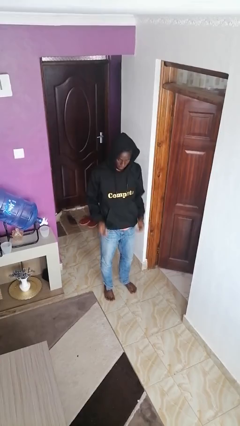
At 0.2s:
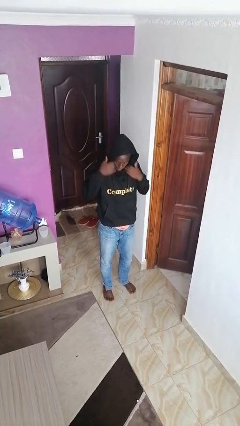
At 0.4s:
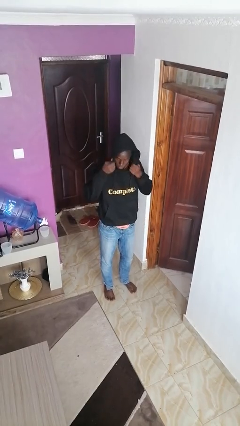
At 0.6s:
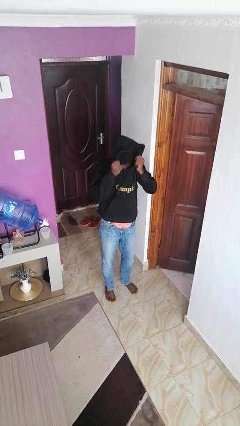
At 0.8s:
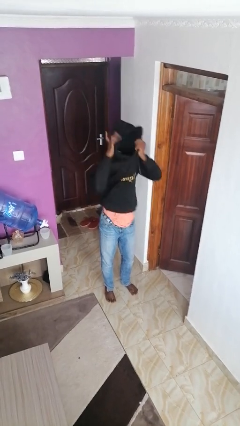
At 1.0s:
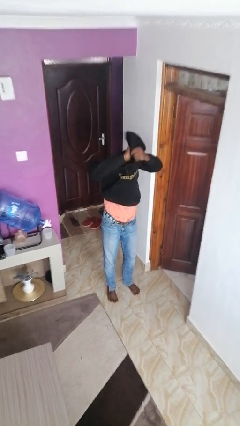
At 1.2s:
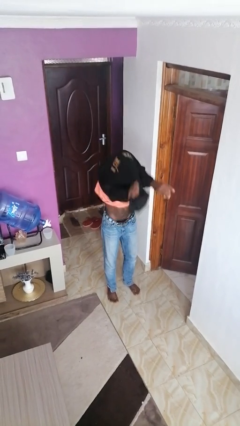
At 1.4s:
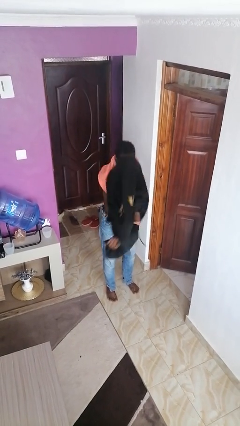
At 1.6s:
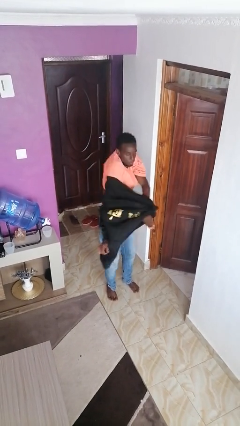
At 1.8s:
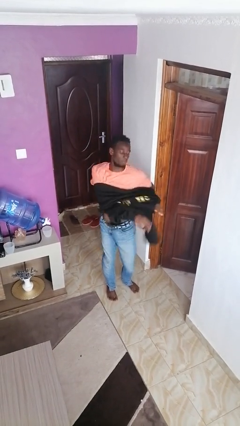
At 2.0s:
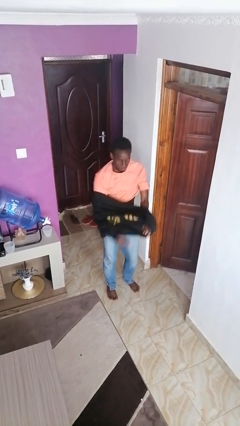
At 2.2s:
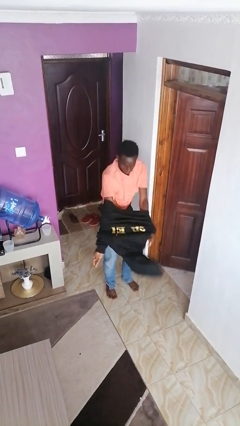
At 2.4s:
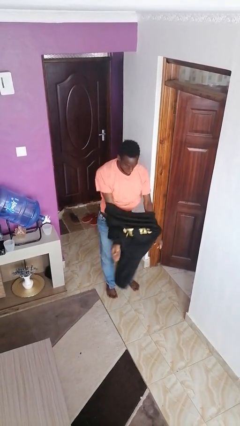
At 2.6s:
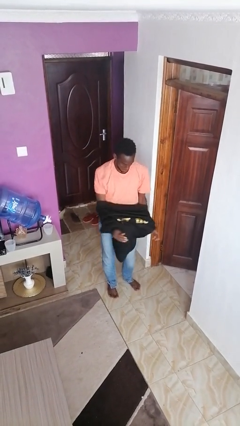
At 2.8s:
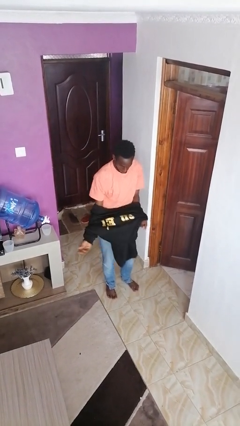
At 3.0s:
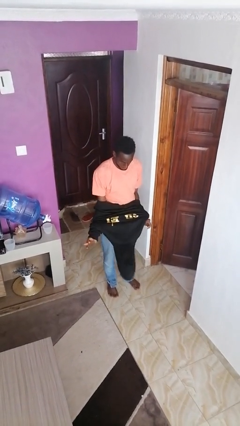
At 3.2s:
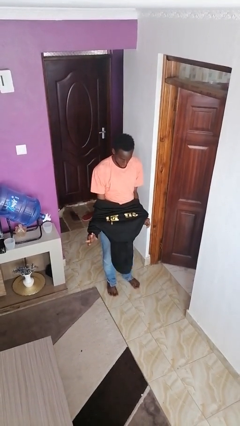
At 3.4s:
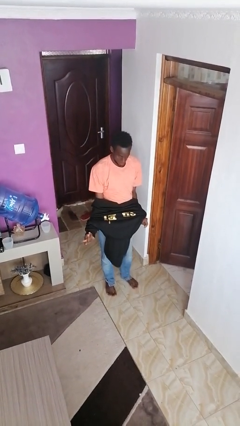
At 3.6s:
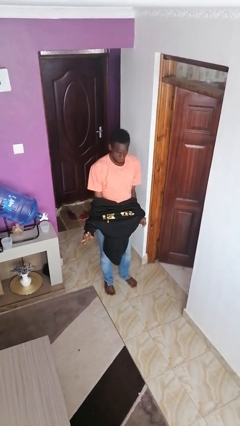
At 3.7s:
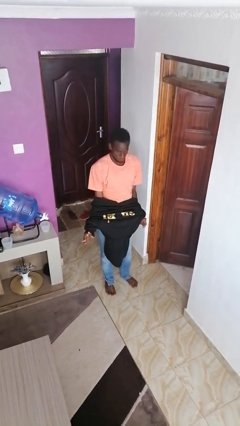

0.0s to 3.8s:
person takes off hoodie

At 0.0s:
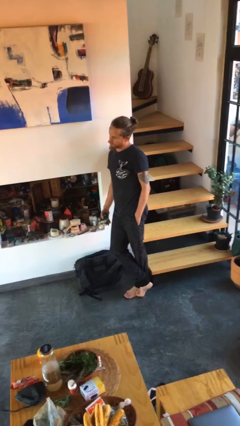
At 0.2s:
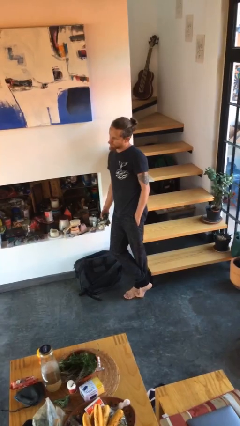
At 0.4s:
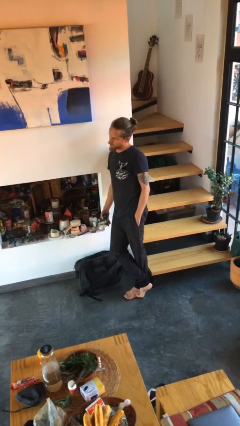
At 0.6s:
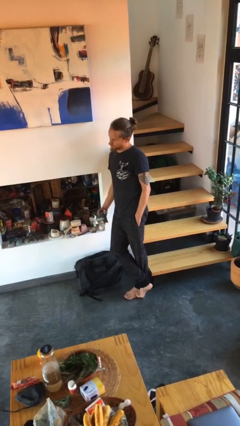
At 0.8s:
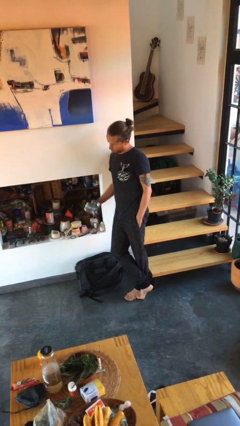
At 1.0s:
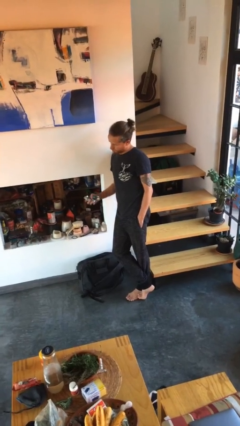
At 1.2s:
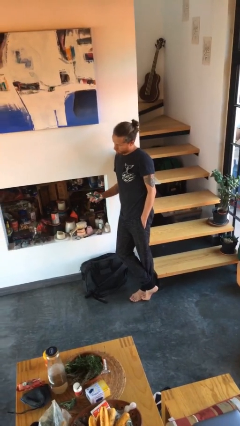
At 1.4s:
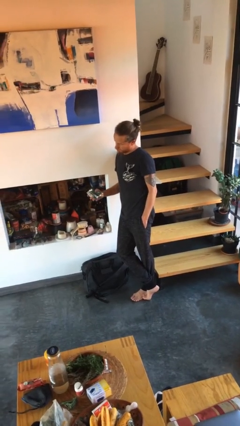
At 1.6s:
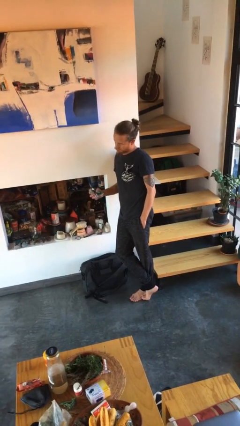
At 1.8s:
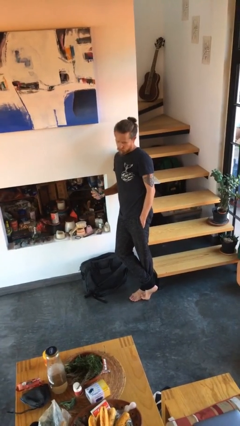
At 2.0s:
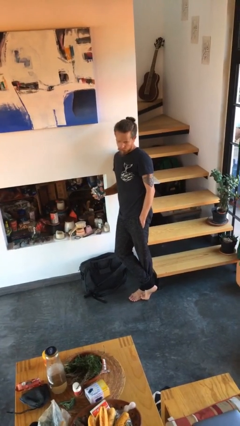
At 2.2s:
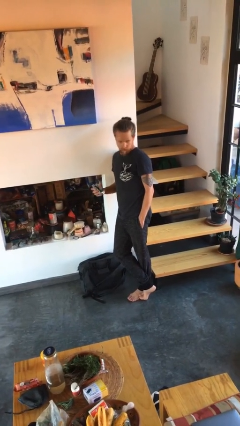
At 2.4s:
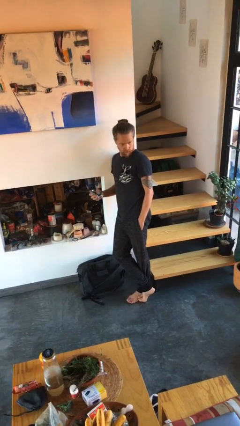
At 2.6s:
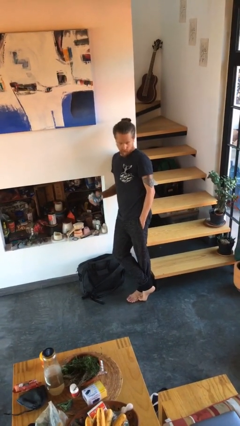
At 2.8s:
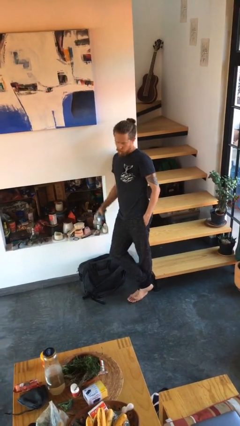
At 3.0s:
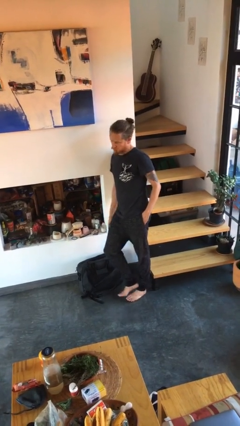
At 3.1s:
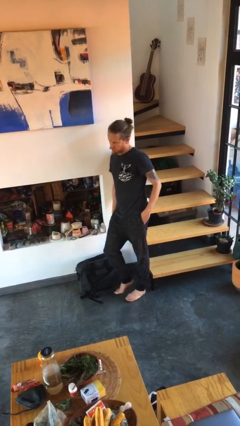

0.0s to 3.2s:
person squeezes object

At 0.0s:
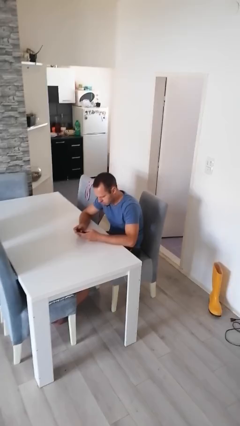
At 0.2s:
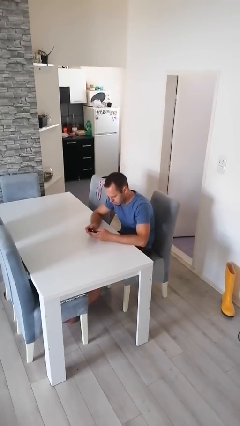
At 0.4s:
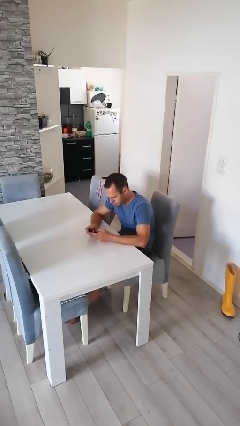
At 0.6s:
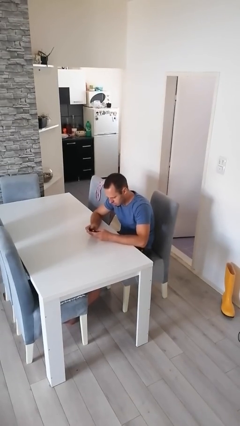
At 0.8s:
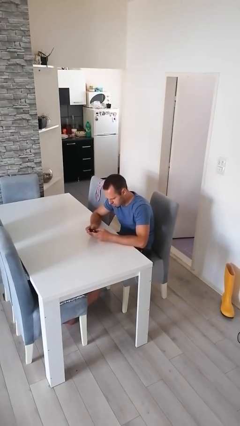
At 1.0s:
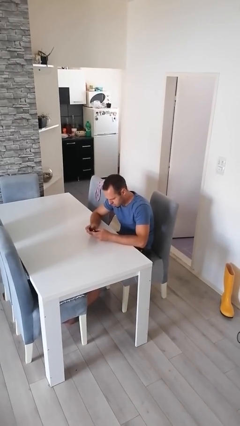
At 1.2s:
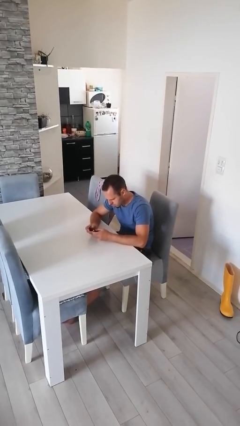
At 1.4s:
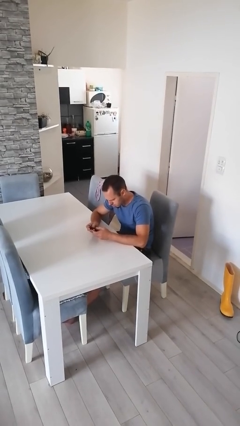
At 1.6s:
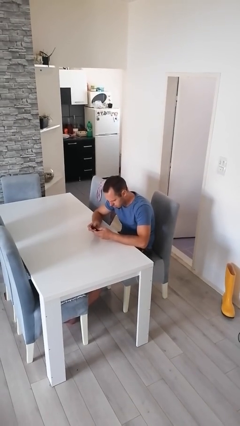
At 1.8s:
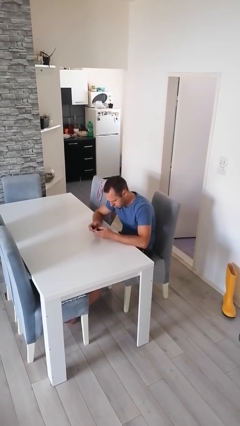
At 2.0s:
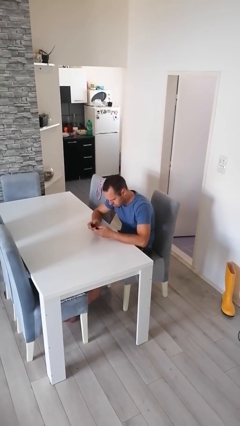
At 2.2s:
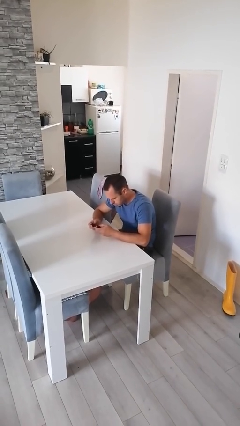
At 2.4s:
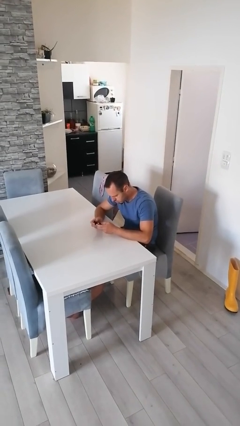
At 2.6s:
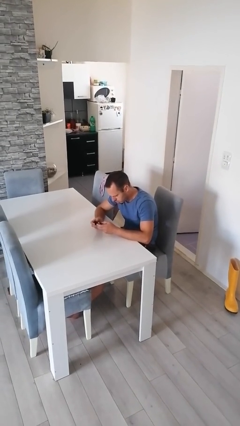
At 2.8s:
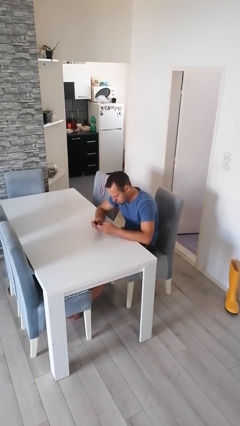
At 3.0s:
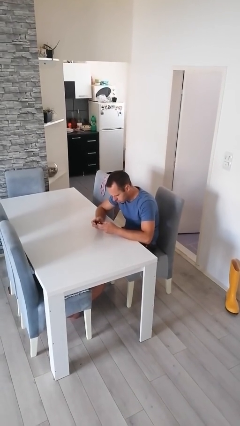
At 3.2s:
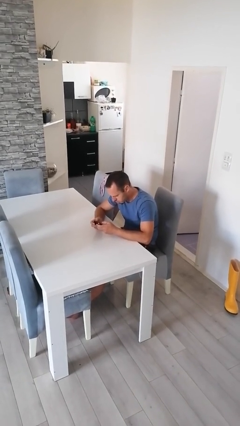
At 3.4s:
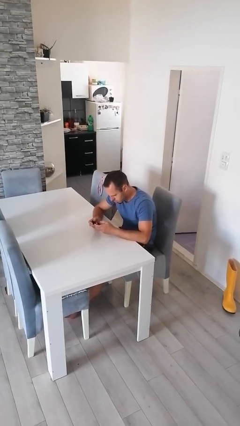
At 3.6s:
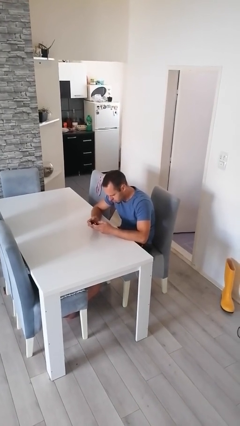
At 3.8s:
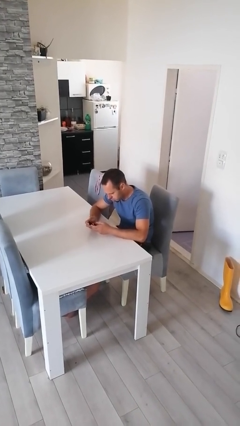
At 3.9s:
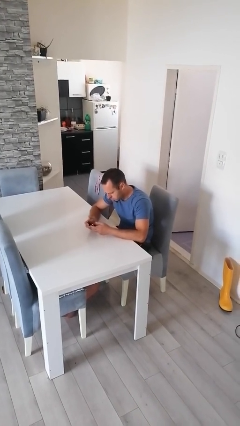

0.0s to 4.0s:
person interacts with handheld game

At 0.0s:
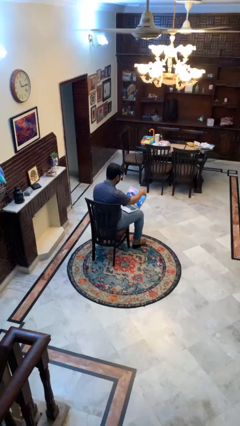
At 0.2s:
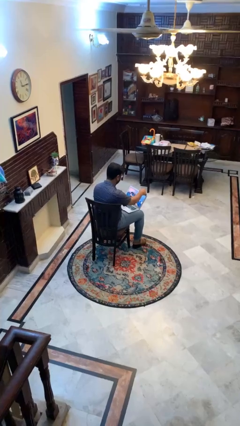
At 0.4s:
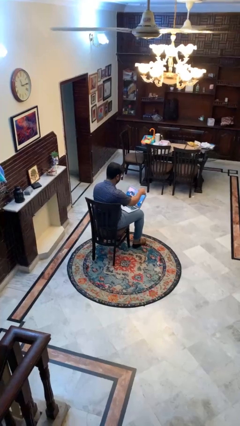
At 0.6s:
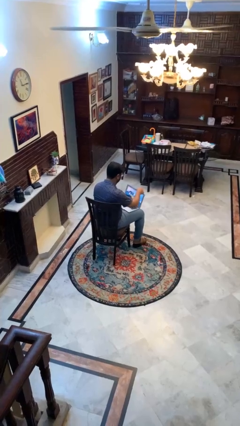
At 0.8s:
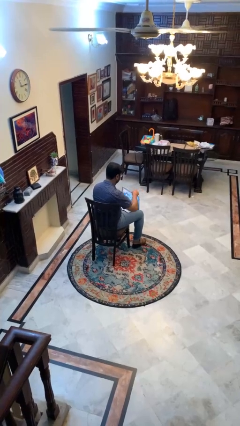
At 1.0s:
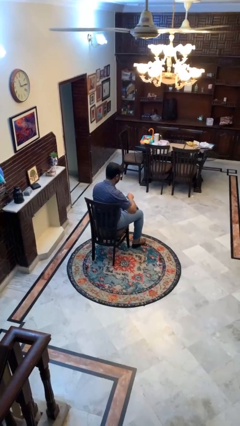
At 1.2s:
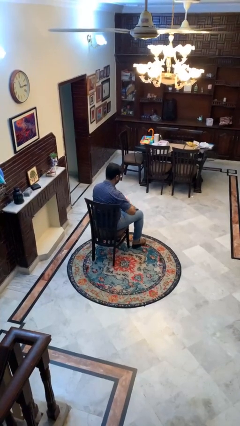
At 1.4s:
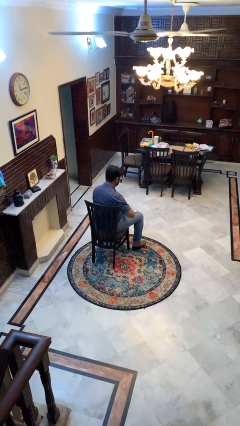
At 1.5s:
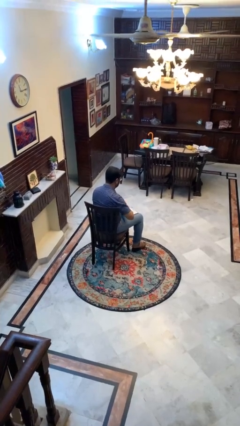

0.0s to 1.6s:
person closes laptop

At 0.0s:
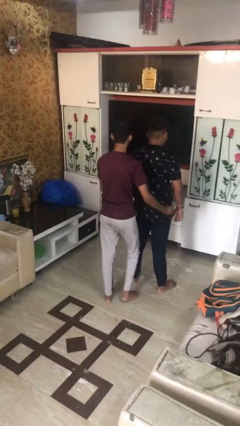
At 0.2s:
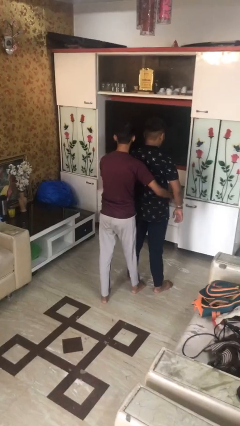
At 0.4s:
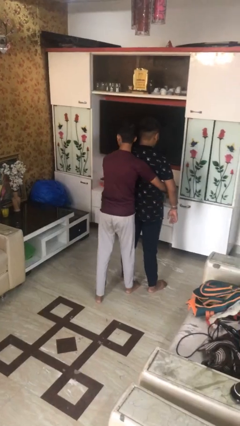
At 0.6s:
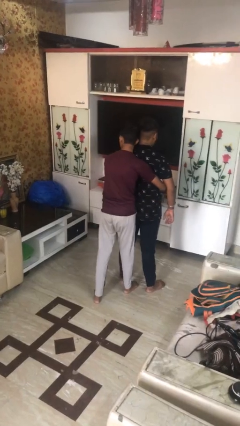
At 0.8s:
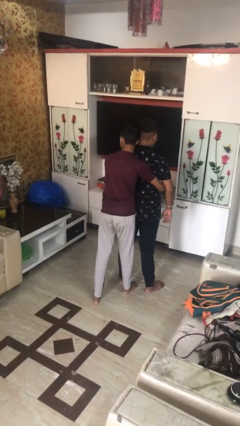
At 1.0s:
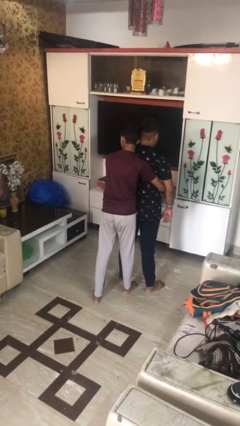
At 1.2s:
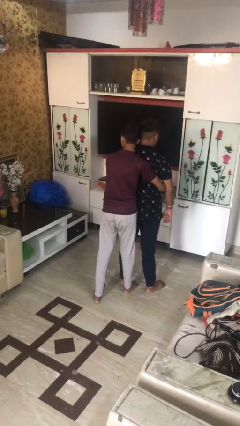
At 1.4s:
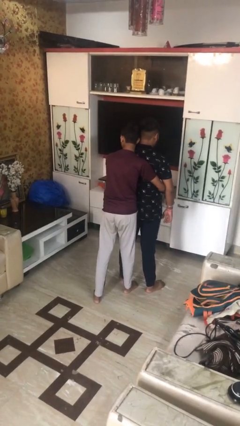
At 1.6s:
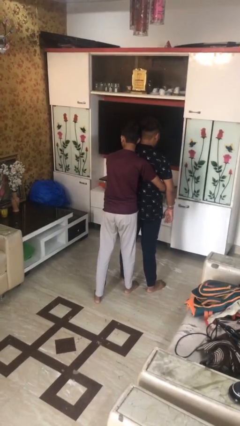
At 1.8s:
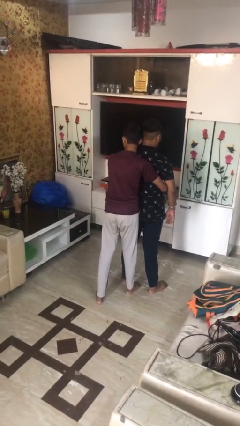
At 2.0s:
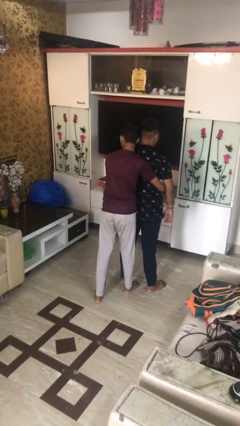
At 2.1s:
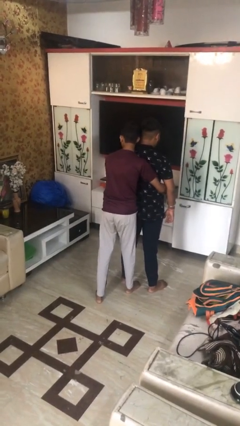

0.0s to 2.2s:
person hugs person from behind

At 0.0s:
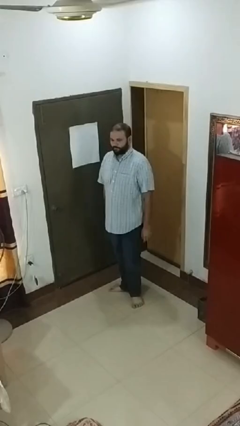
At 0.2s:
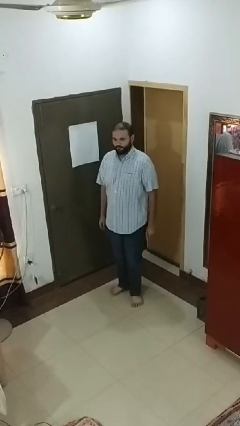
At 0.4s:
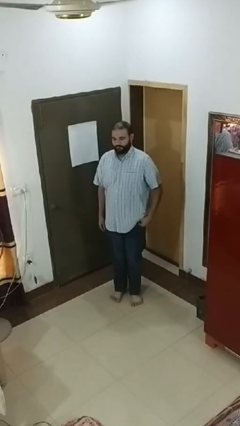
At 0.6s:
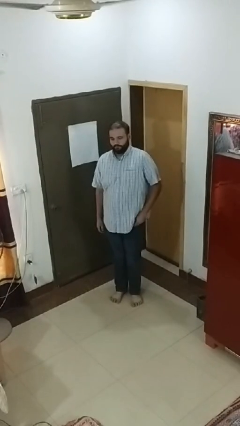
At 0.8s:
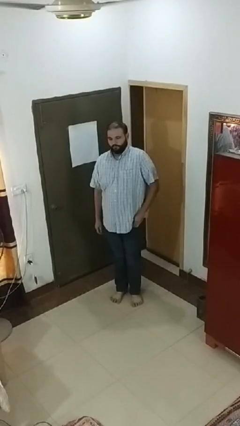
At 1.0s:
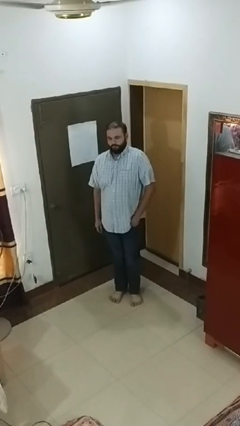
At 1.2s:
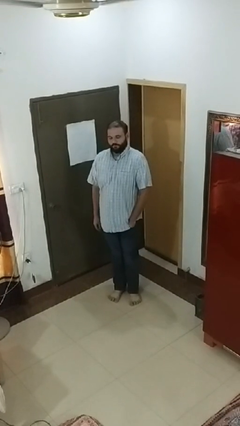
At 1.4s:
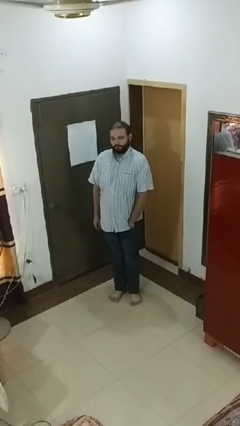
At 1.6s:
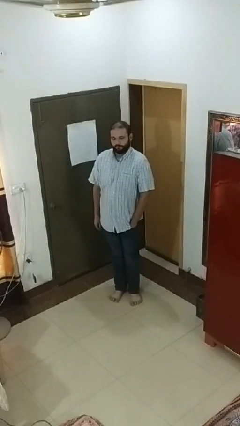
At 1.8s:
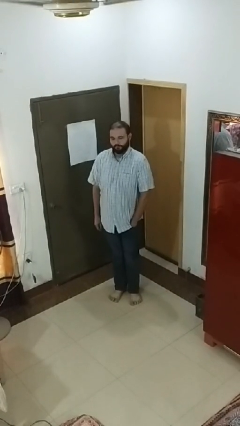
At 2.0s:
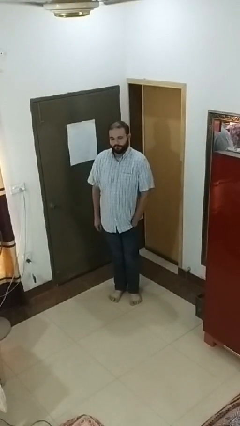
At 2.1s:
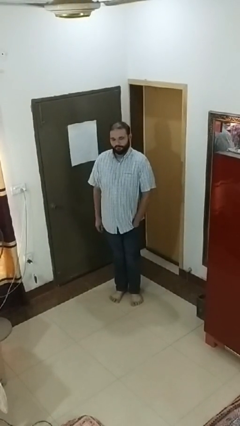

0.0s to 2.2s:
person puts hands in back pockets

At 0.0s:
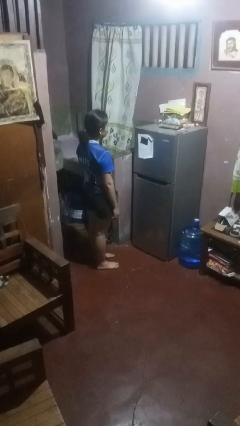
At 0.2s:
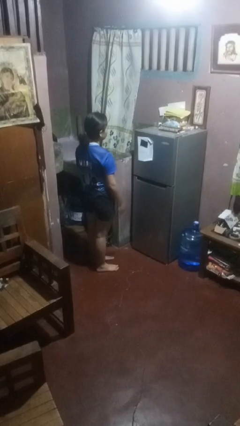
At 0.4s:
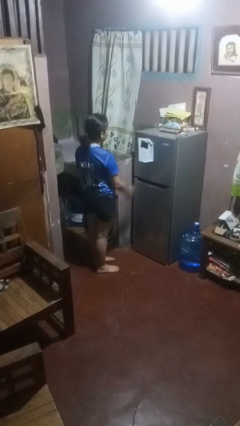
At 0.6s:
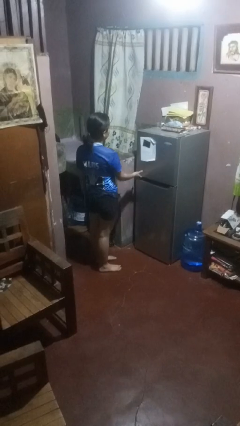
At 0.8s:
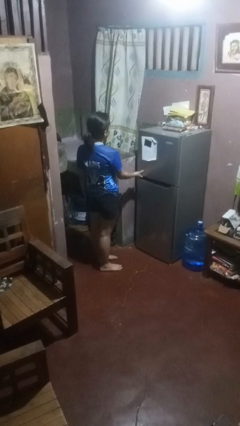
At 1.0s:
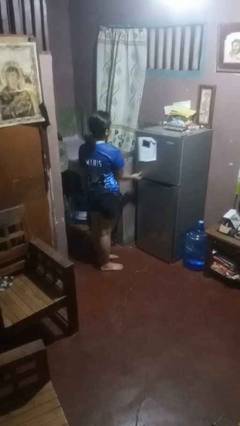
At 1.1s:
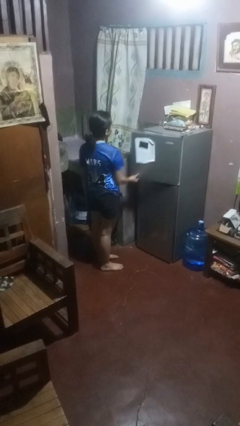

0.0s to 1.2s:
person opens refrigerator
